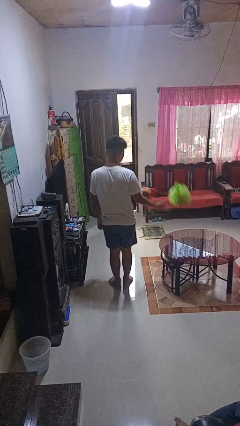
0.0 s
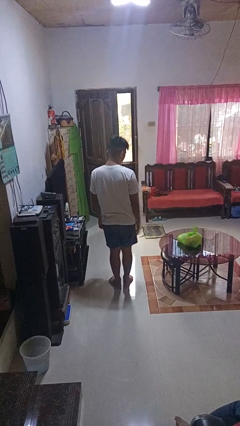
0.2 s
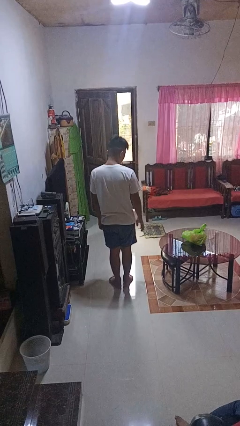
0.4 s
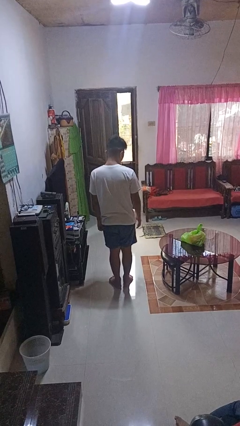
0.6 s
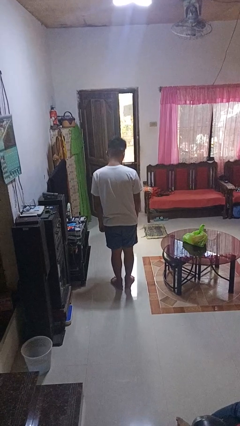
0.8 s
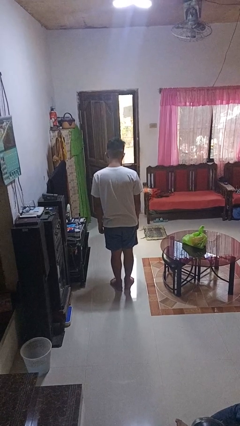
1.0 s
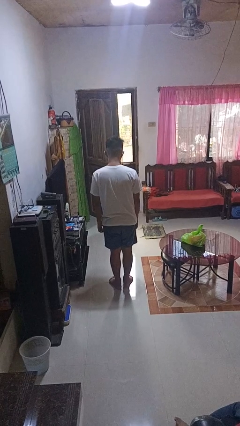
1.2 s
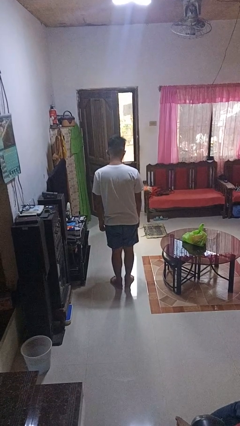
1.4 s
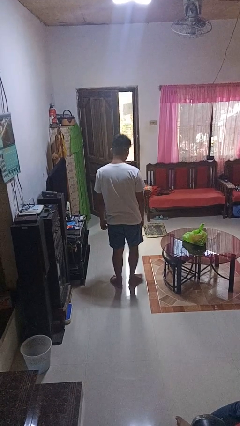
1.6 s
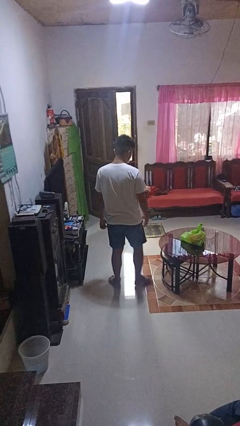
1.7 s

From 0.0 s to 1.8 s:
person throws object on table

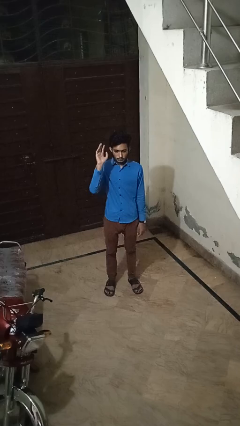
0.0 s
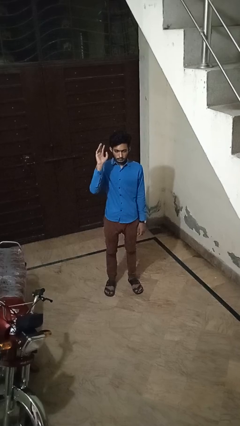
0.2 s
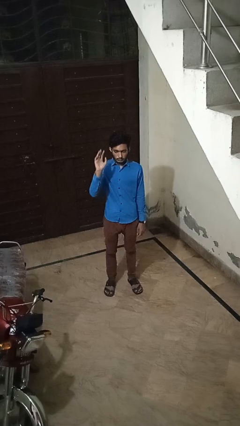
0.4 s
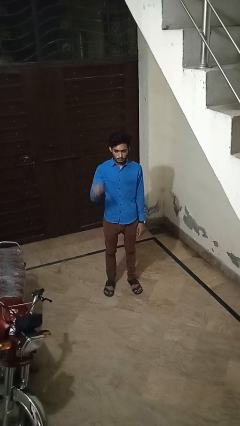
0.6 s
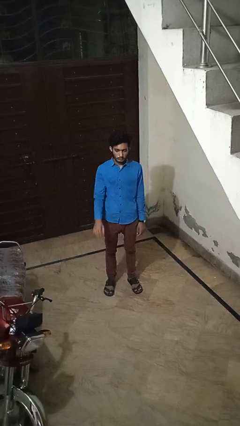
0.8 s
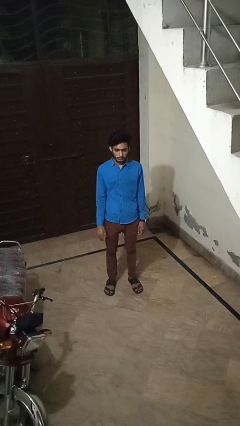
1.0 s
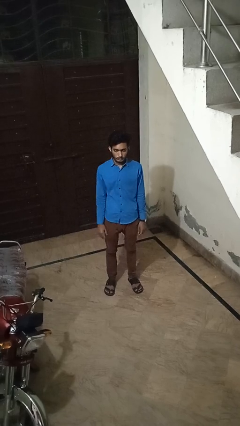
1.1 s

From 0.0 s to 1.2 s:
person gestures lower hand

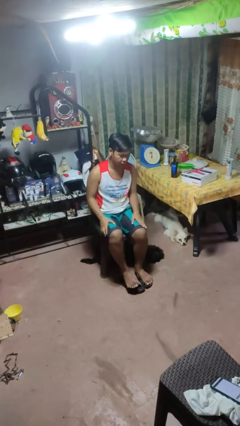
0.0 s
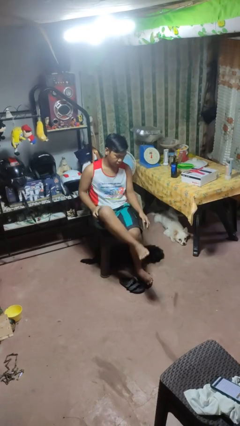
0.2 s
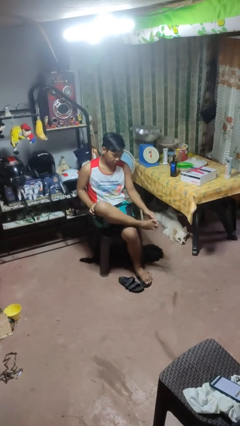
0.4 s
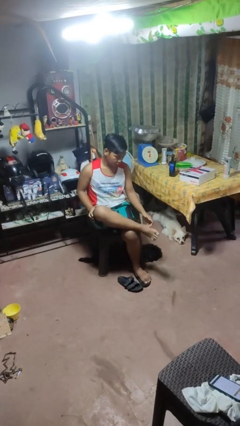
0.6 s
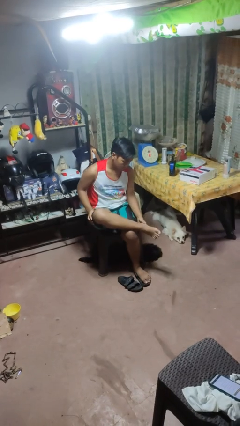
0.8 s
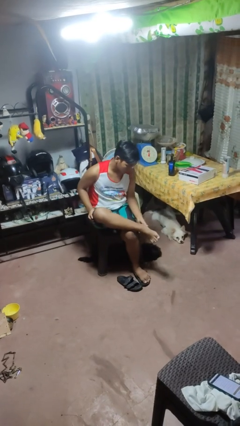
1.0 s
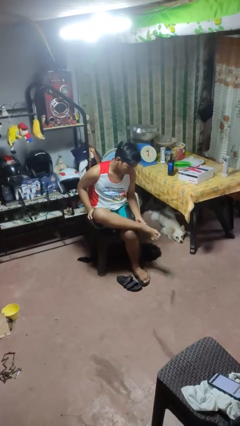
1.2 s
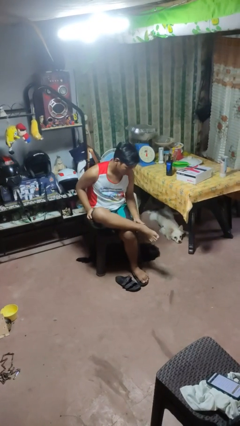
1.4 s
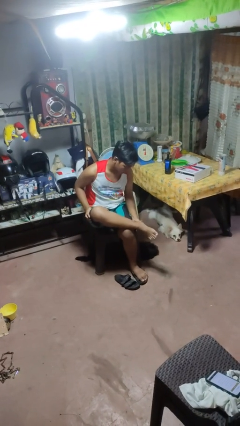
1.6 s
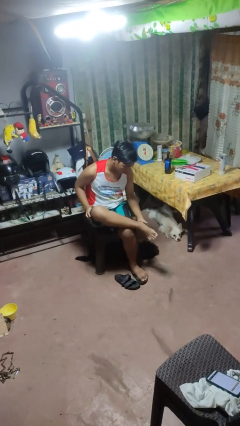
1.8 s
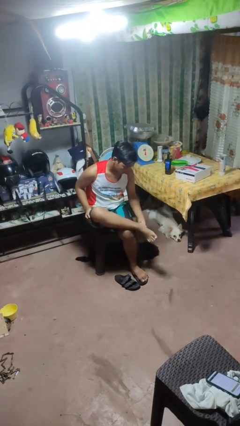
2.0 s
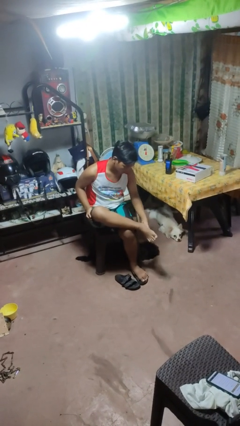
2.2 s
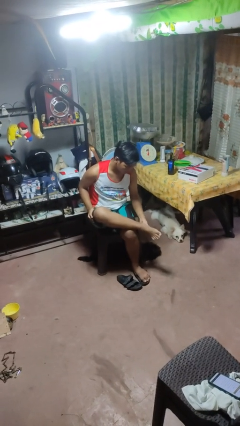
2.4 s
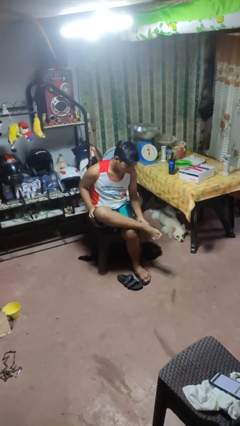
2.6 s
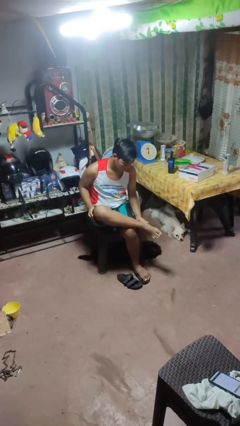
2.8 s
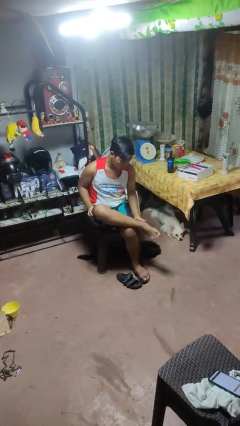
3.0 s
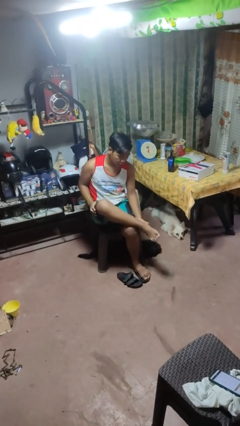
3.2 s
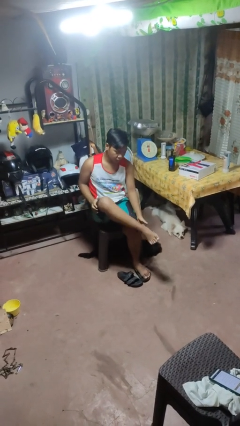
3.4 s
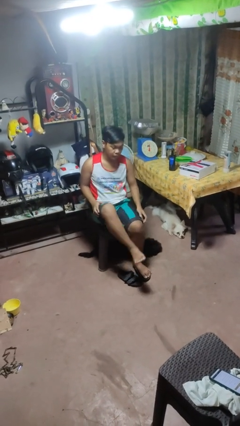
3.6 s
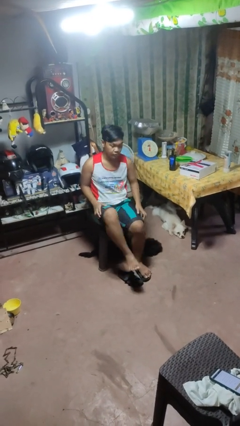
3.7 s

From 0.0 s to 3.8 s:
person rubs foot

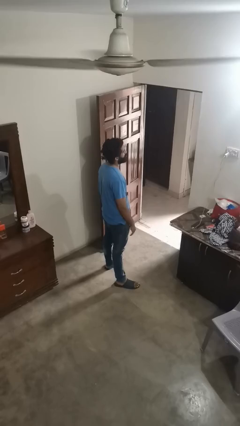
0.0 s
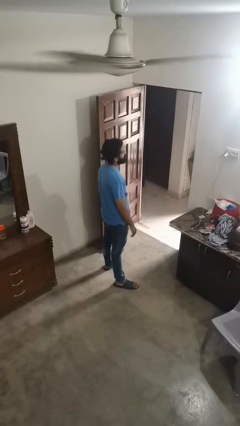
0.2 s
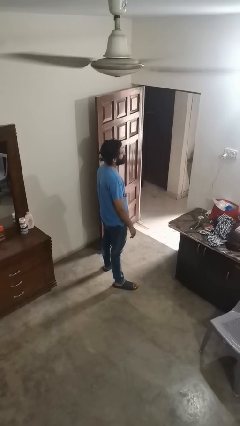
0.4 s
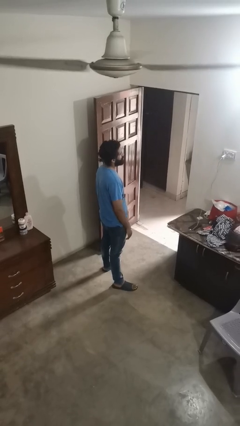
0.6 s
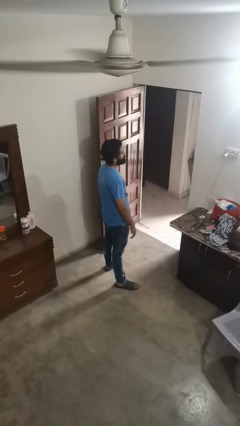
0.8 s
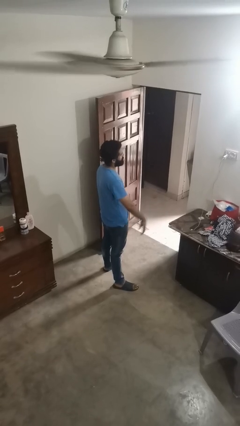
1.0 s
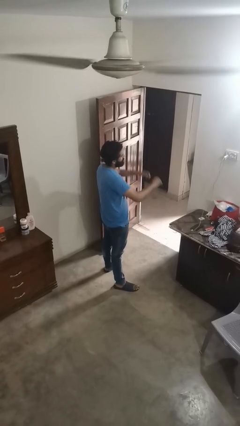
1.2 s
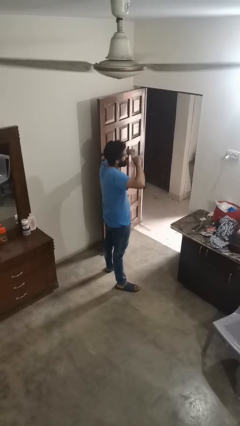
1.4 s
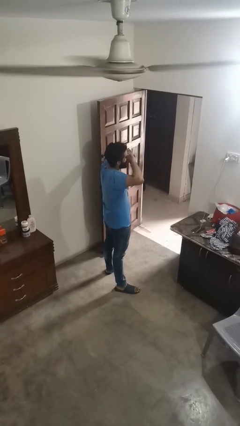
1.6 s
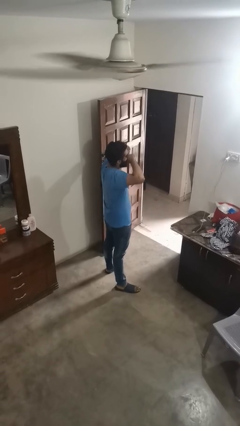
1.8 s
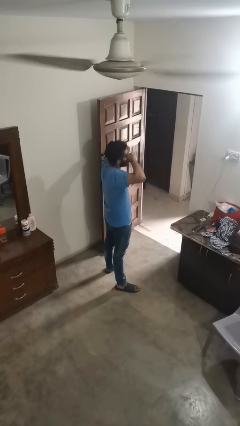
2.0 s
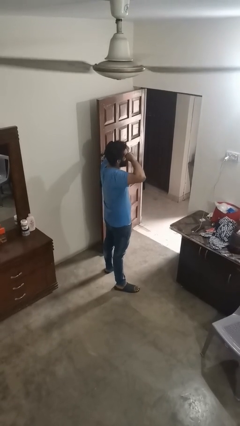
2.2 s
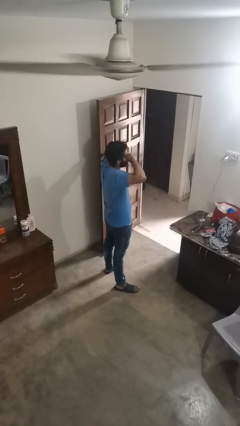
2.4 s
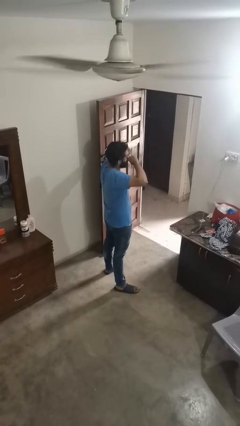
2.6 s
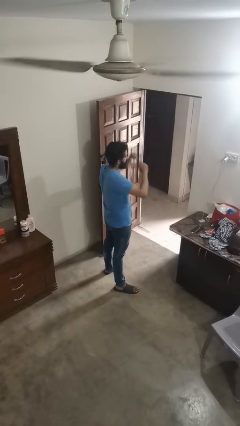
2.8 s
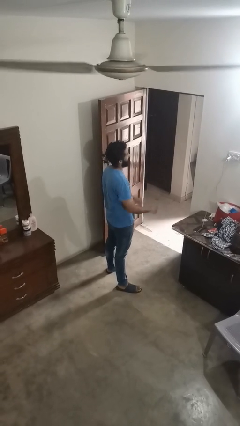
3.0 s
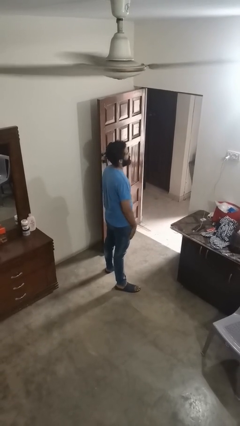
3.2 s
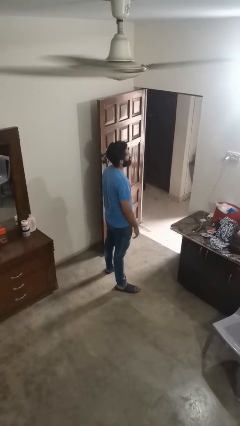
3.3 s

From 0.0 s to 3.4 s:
person rubs eyes

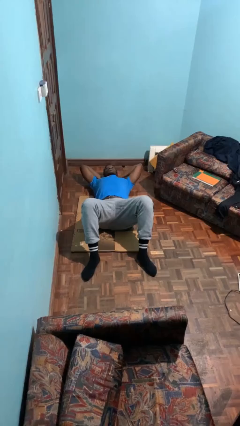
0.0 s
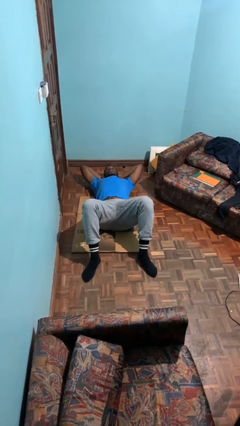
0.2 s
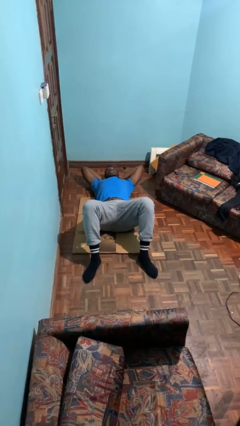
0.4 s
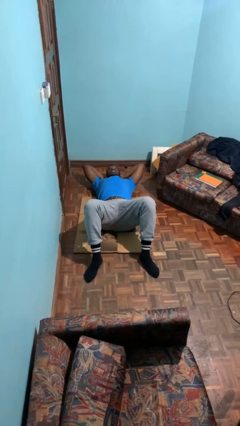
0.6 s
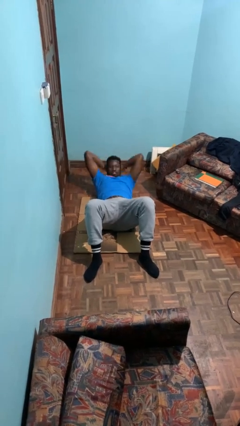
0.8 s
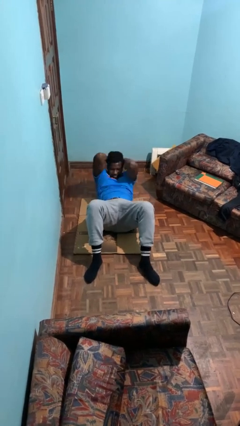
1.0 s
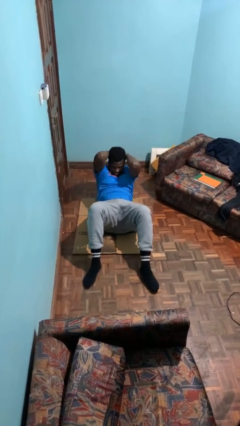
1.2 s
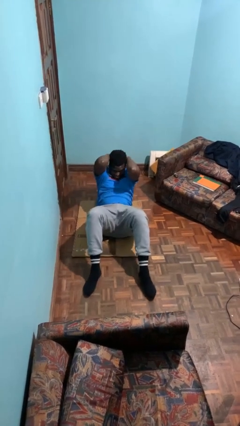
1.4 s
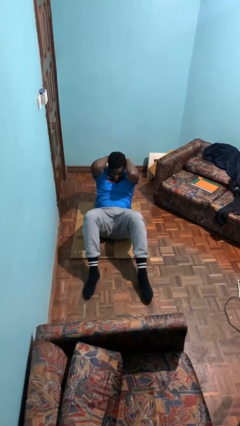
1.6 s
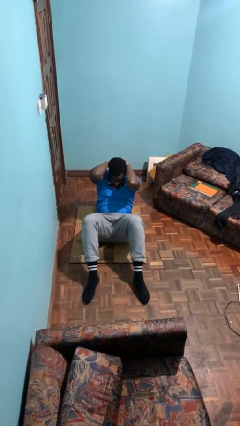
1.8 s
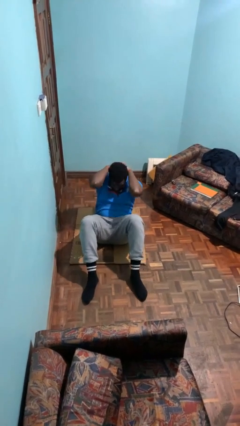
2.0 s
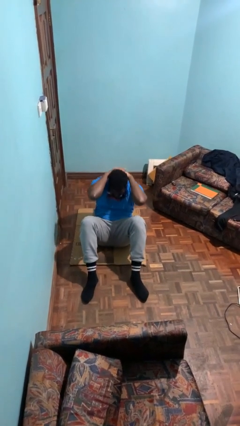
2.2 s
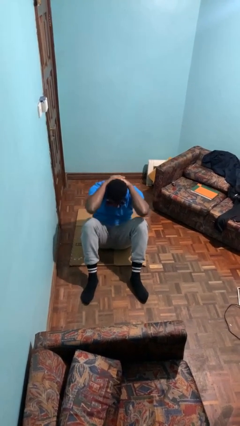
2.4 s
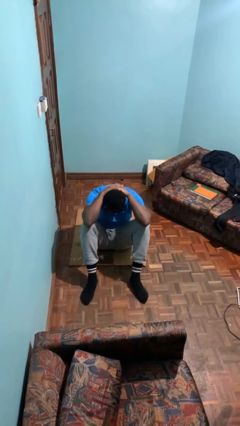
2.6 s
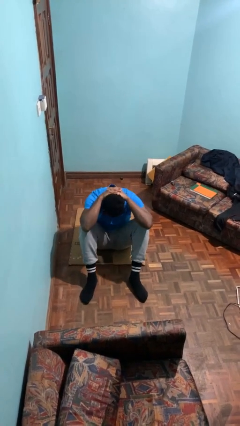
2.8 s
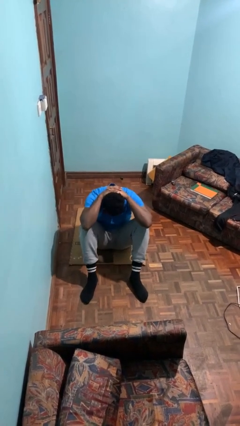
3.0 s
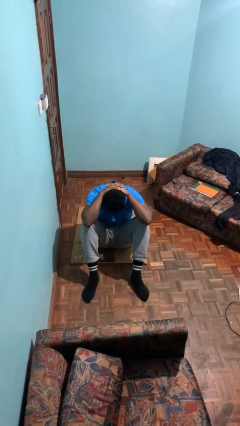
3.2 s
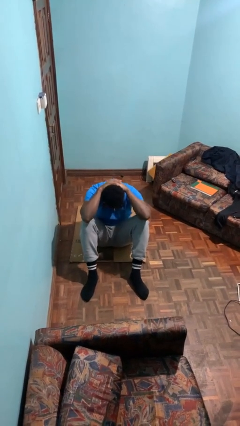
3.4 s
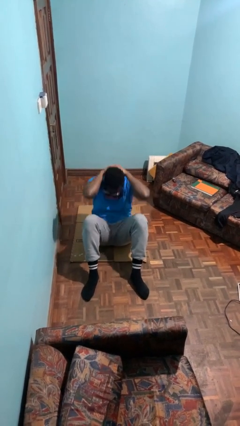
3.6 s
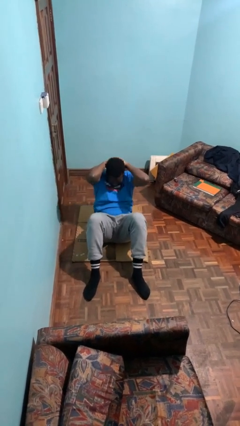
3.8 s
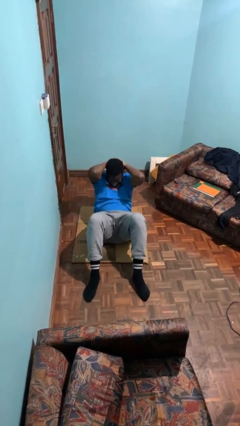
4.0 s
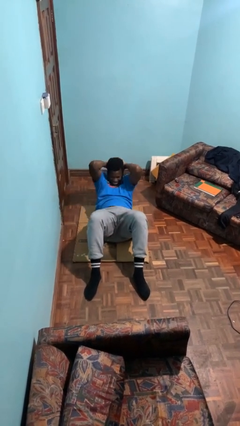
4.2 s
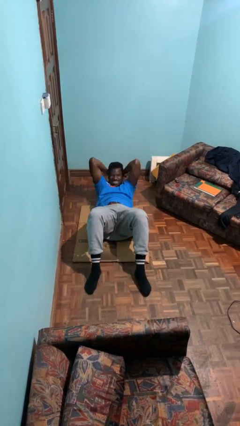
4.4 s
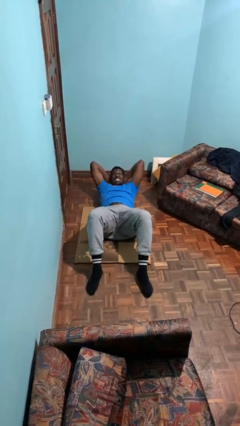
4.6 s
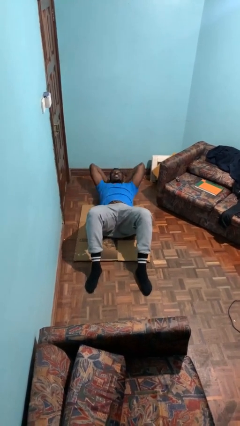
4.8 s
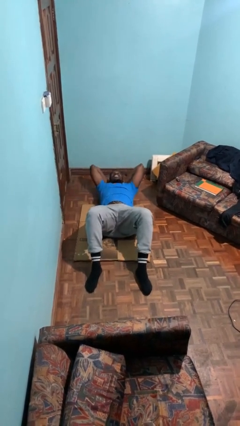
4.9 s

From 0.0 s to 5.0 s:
person exercises with situp

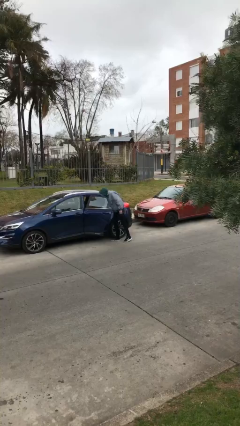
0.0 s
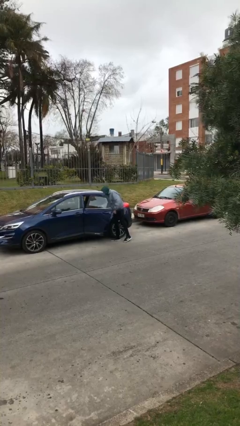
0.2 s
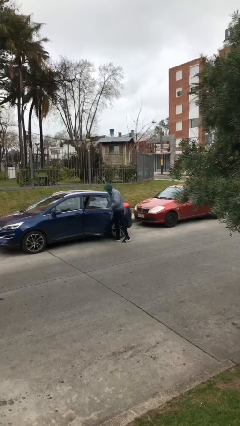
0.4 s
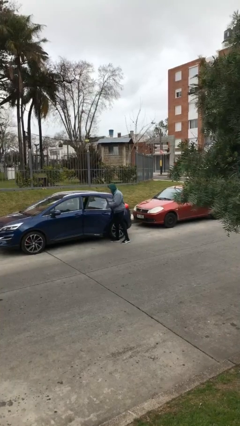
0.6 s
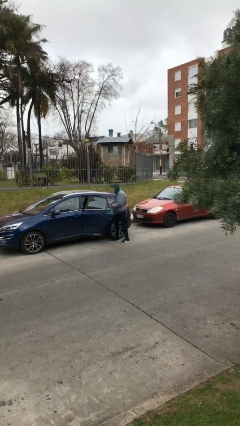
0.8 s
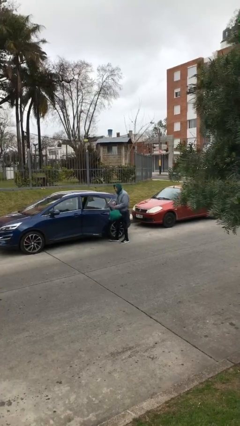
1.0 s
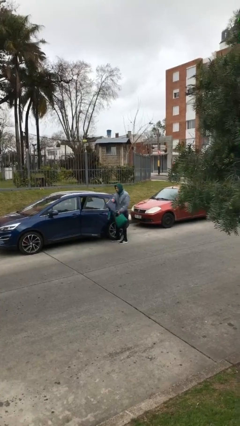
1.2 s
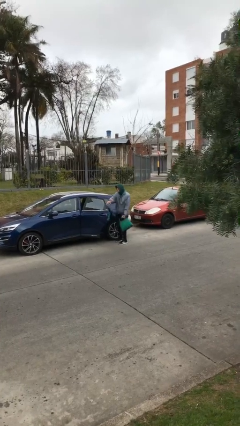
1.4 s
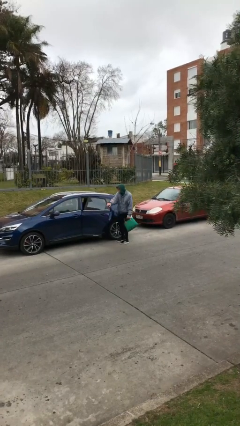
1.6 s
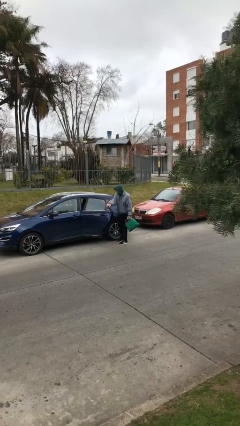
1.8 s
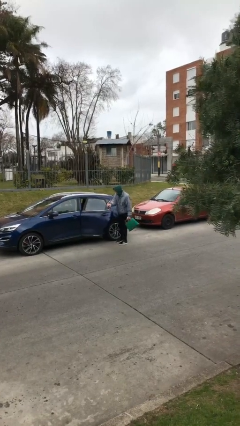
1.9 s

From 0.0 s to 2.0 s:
person unloads car

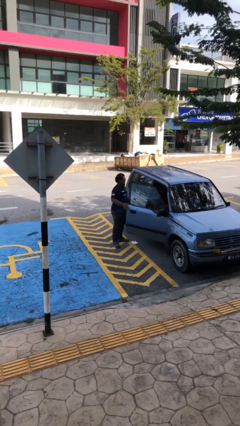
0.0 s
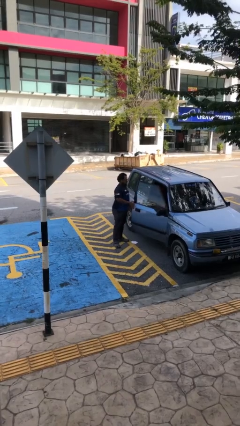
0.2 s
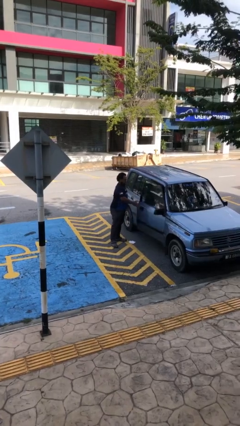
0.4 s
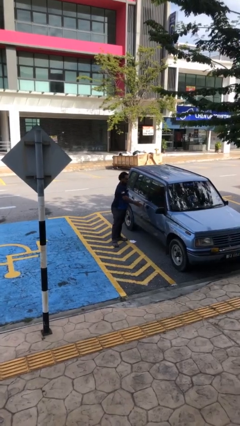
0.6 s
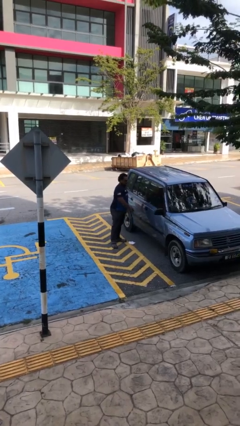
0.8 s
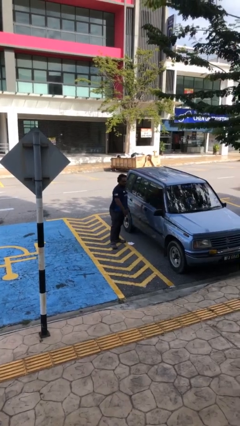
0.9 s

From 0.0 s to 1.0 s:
person closes car door
